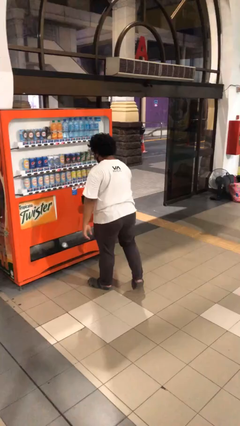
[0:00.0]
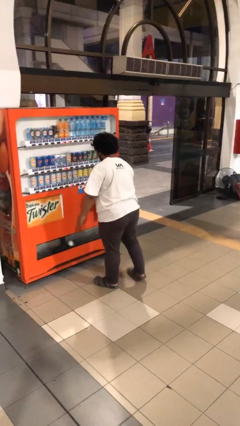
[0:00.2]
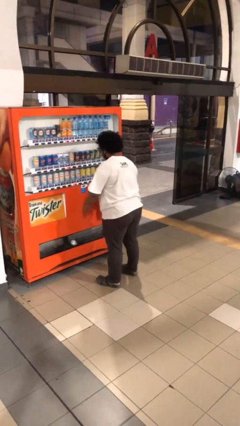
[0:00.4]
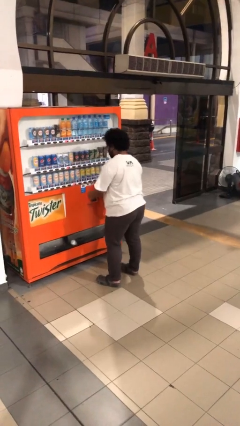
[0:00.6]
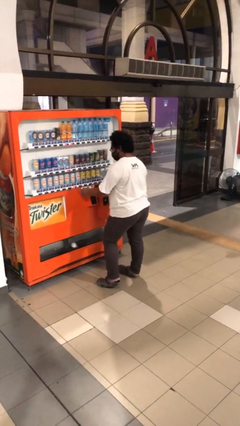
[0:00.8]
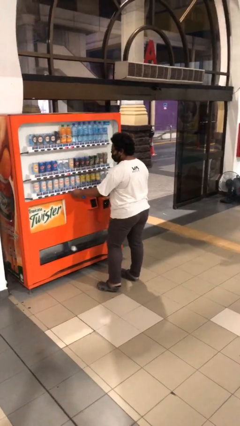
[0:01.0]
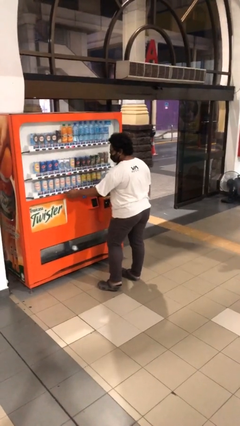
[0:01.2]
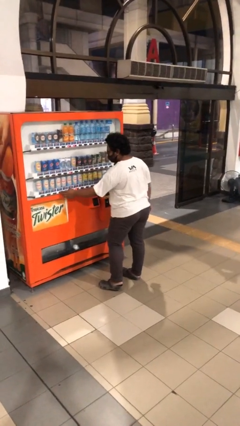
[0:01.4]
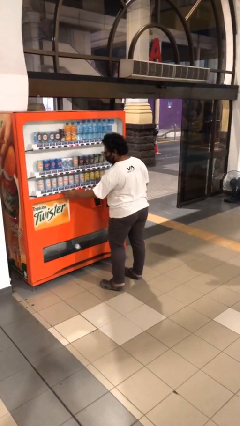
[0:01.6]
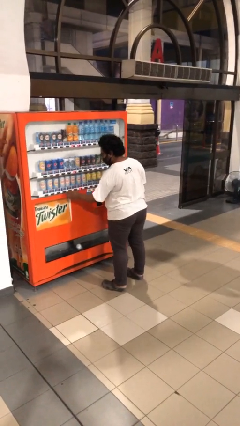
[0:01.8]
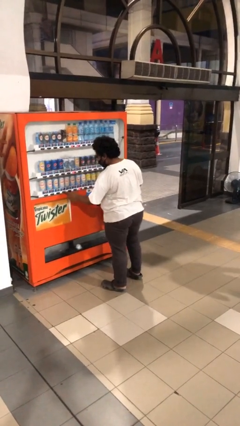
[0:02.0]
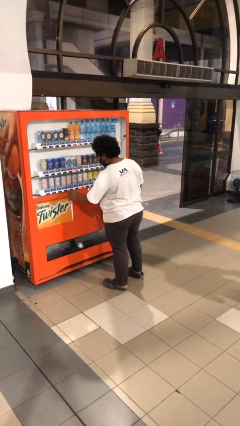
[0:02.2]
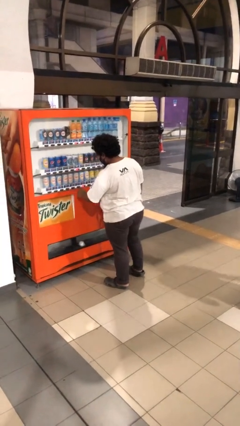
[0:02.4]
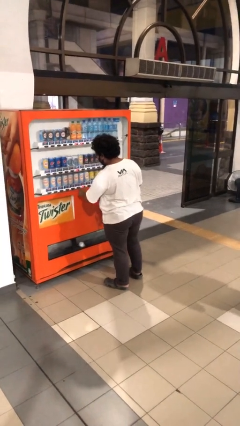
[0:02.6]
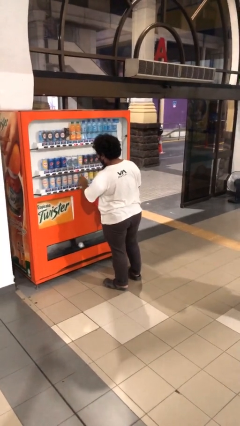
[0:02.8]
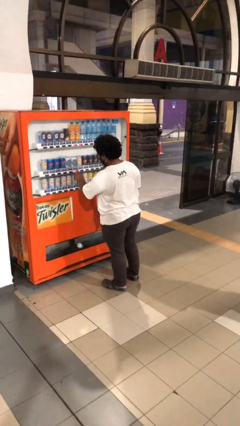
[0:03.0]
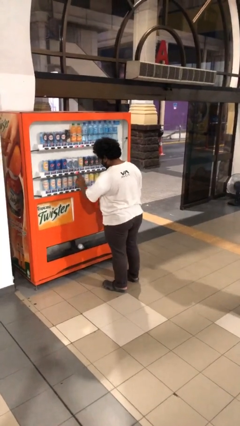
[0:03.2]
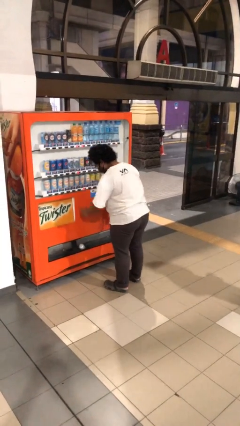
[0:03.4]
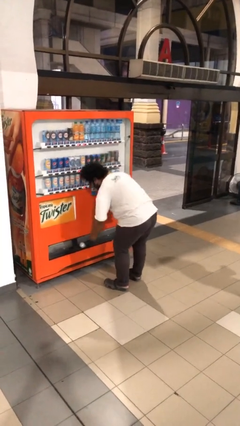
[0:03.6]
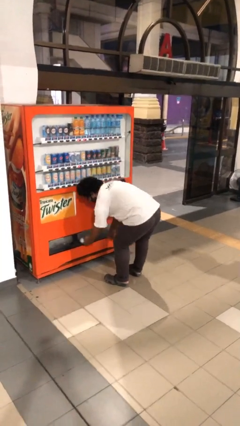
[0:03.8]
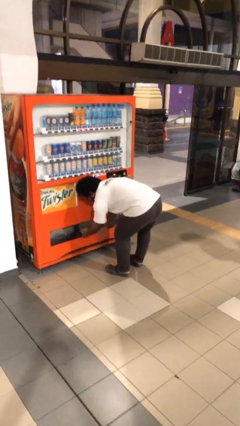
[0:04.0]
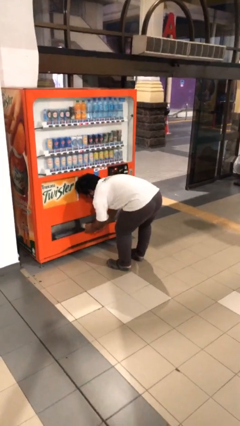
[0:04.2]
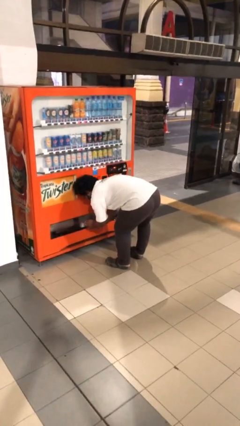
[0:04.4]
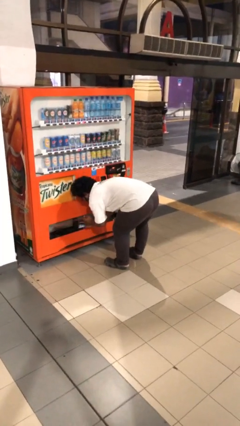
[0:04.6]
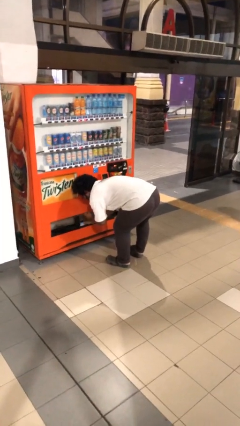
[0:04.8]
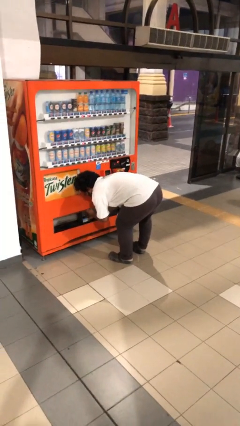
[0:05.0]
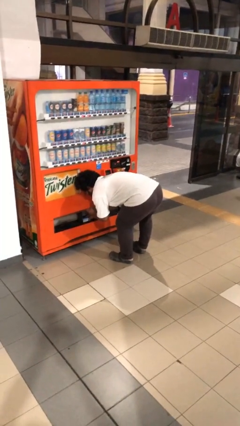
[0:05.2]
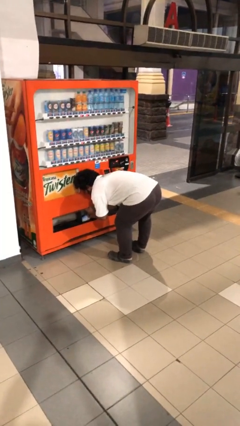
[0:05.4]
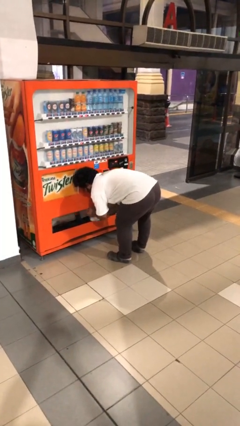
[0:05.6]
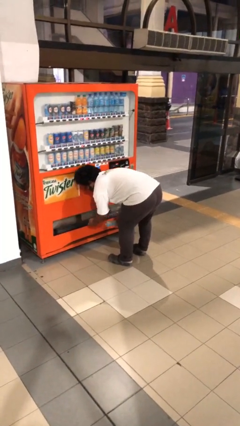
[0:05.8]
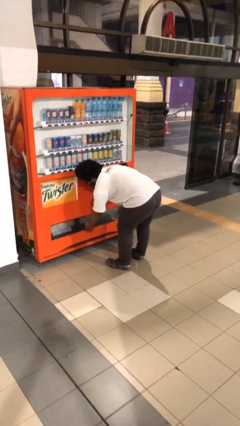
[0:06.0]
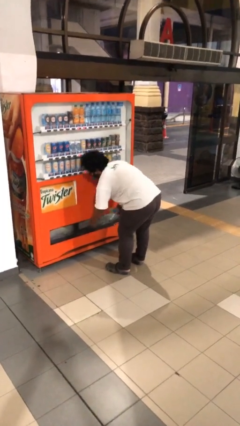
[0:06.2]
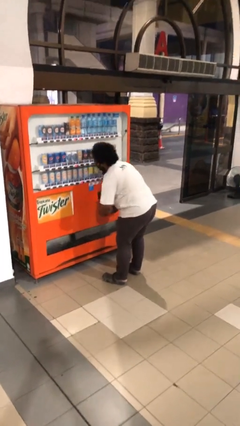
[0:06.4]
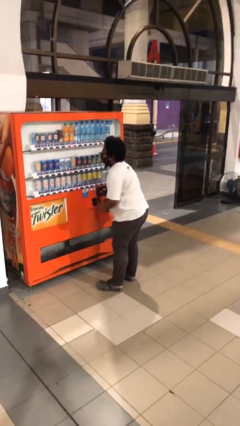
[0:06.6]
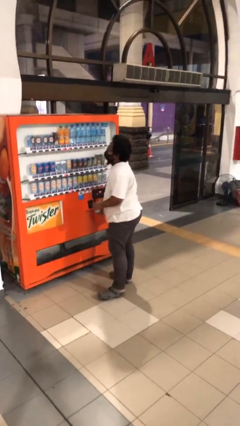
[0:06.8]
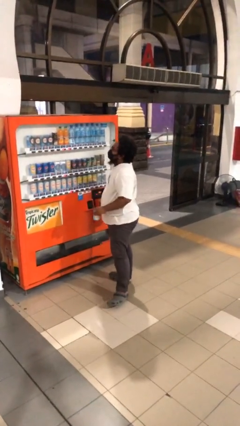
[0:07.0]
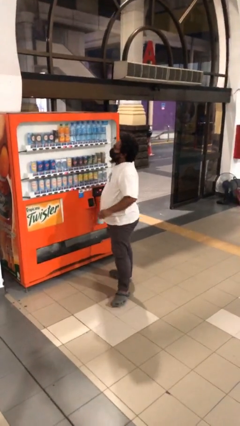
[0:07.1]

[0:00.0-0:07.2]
person purchases from machine

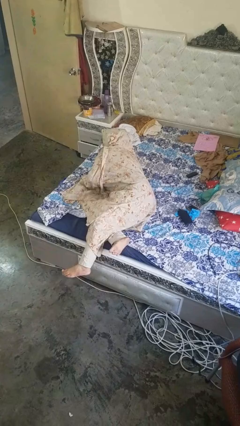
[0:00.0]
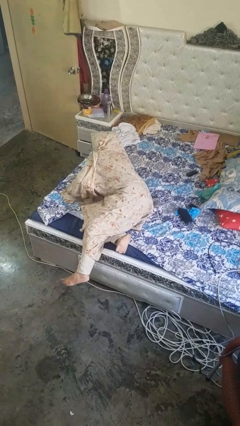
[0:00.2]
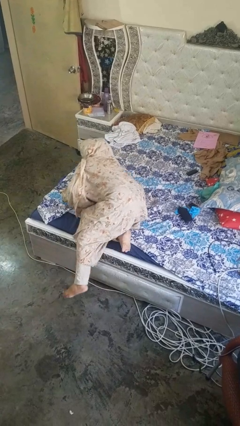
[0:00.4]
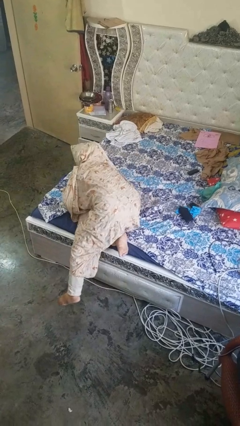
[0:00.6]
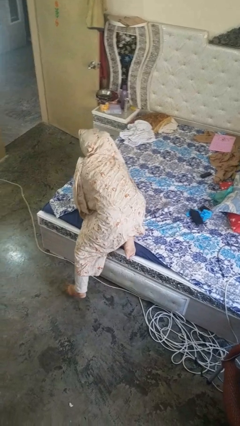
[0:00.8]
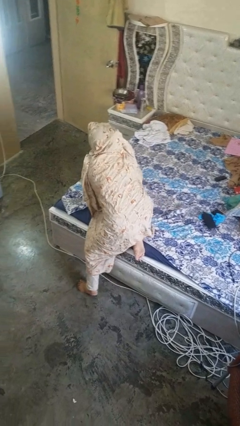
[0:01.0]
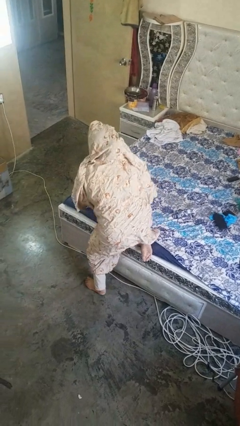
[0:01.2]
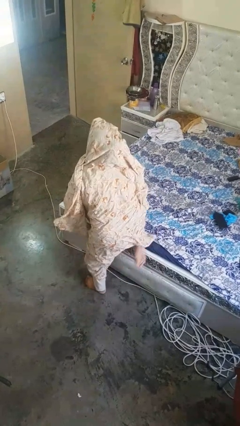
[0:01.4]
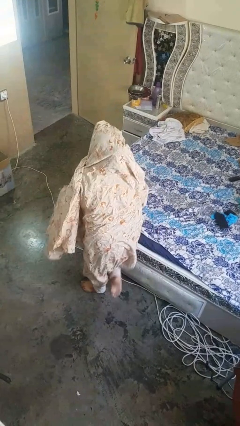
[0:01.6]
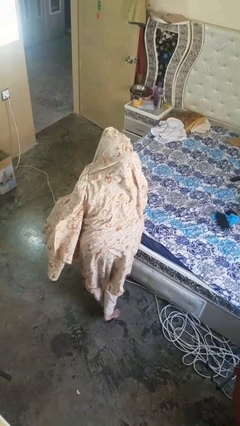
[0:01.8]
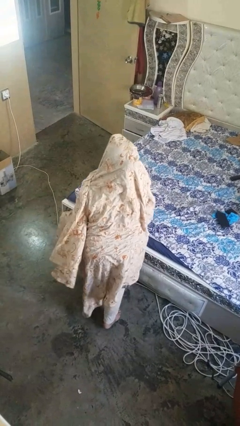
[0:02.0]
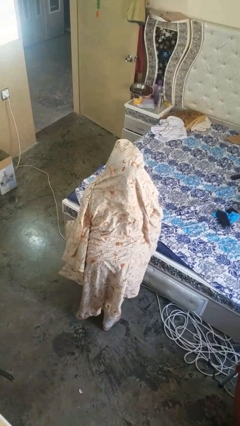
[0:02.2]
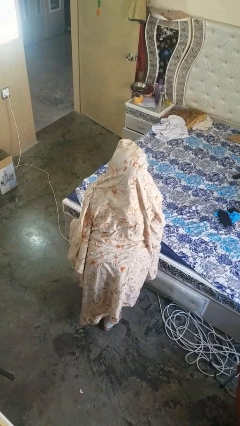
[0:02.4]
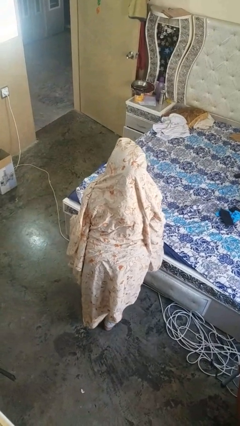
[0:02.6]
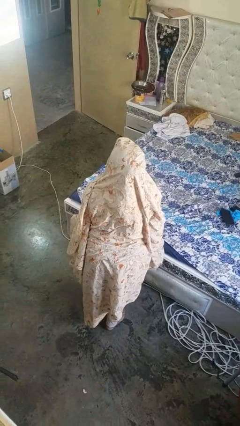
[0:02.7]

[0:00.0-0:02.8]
person stands up

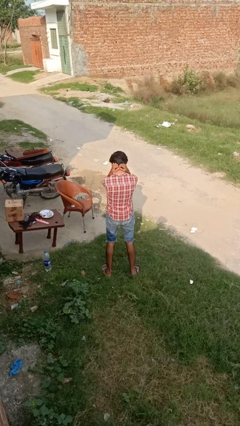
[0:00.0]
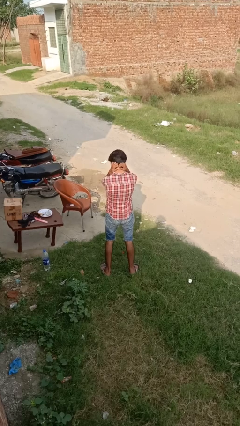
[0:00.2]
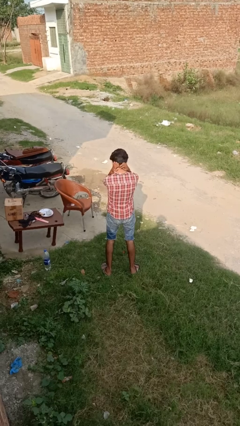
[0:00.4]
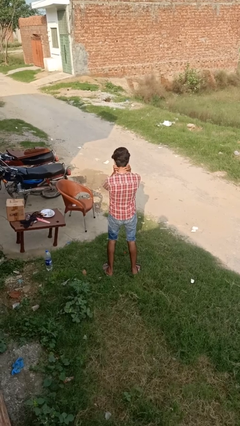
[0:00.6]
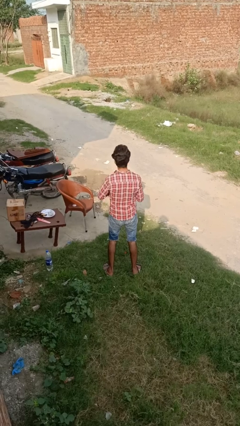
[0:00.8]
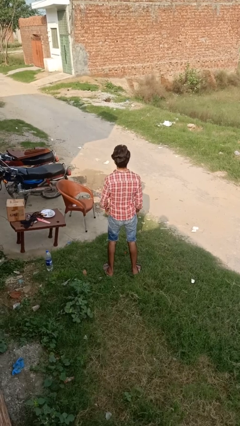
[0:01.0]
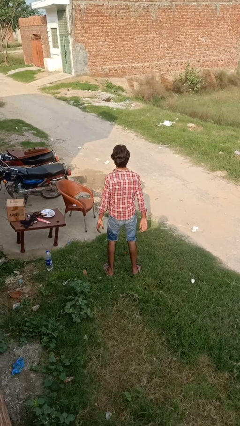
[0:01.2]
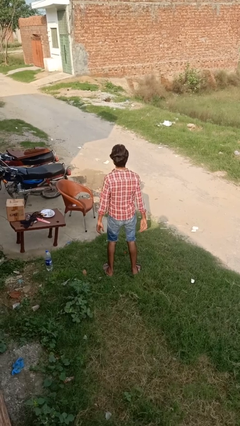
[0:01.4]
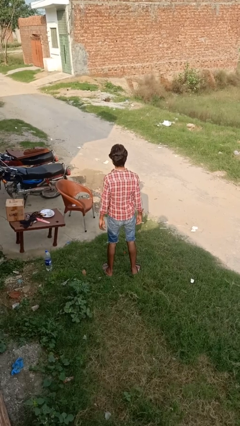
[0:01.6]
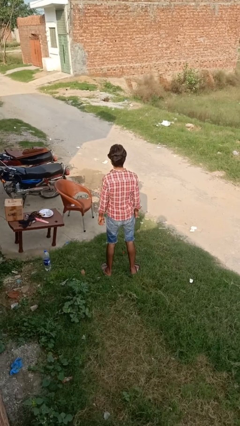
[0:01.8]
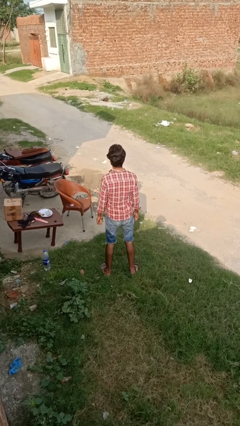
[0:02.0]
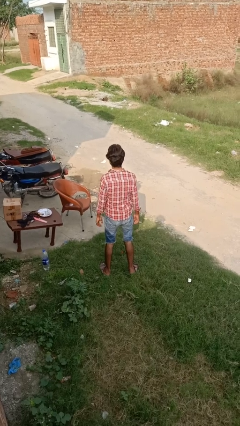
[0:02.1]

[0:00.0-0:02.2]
person takes off necklace

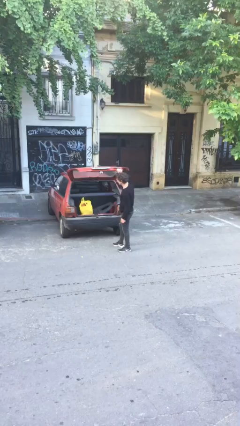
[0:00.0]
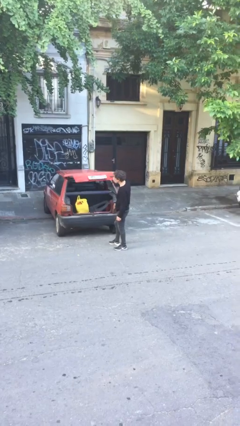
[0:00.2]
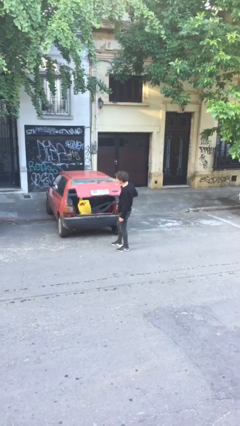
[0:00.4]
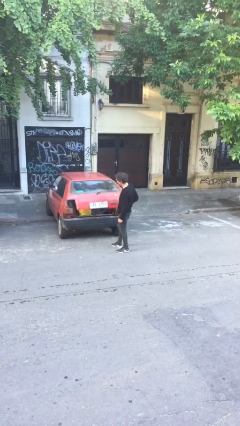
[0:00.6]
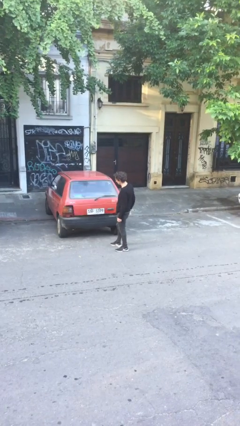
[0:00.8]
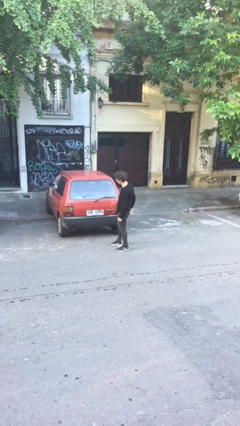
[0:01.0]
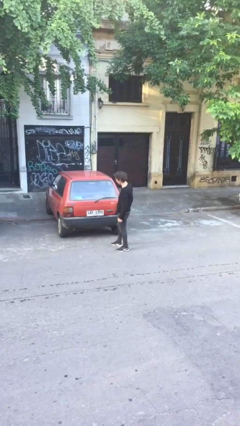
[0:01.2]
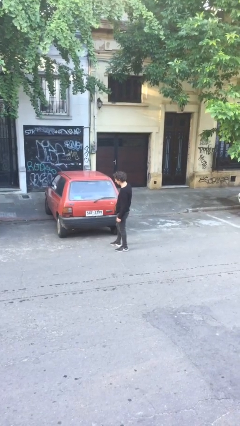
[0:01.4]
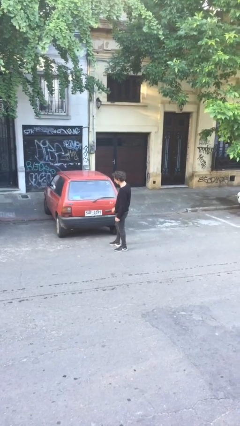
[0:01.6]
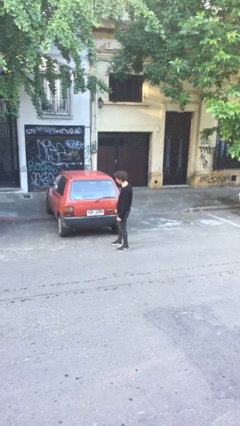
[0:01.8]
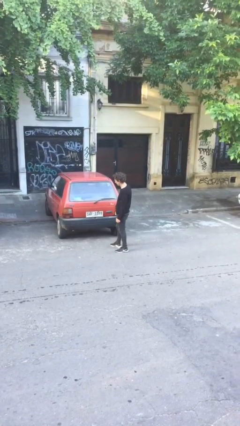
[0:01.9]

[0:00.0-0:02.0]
person closes car trunk

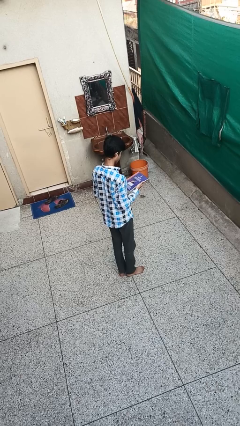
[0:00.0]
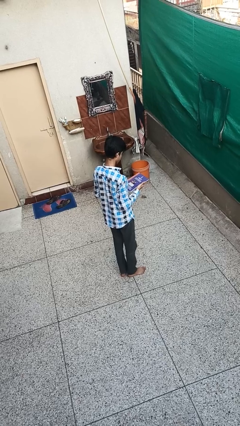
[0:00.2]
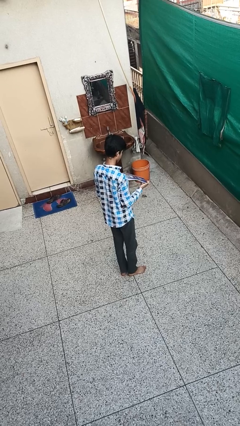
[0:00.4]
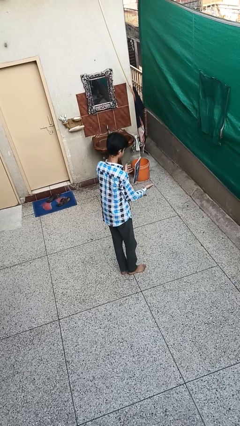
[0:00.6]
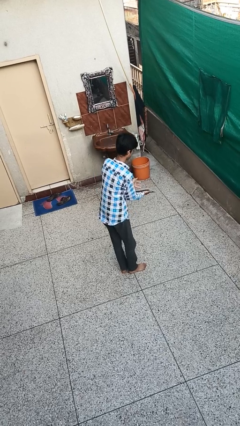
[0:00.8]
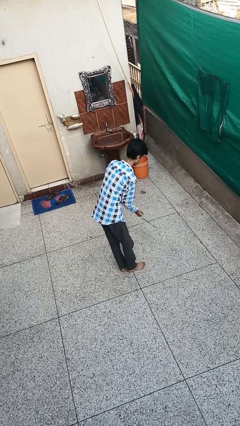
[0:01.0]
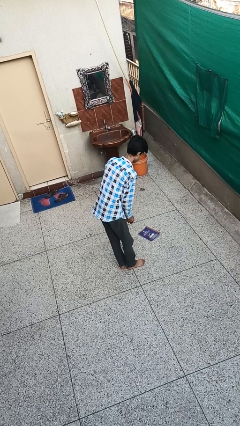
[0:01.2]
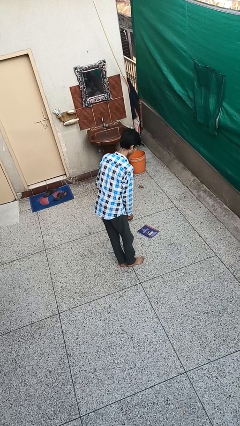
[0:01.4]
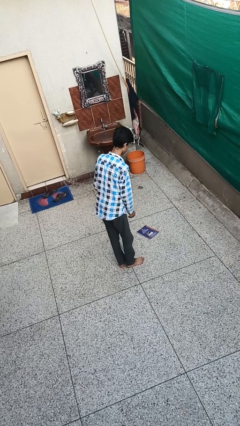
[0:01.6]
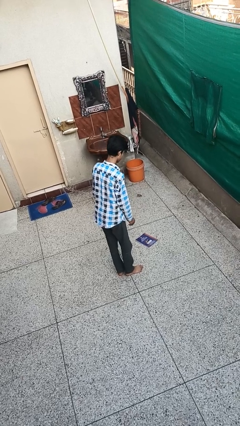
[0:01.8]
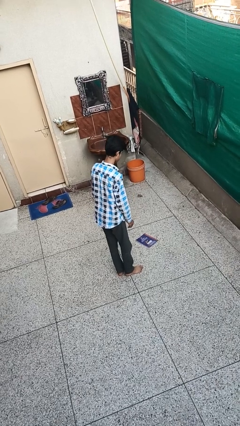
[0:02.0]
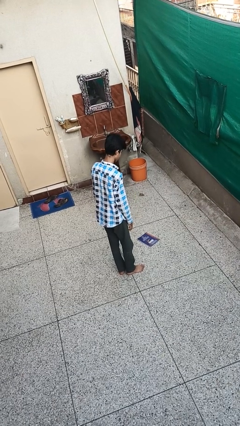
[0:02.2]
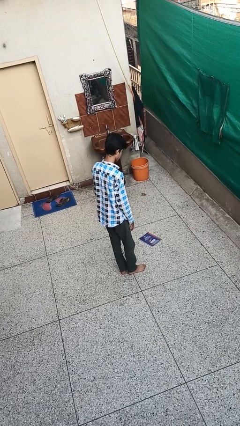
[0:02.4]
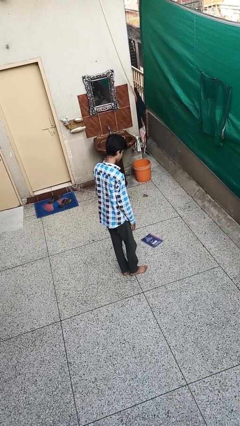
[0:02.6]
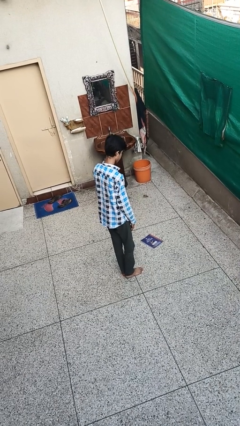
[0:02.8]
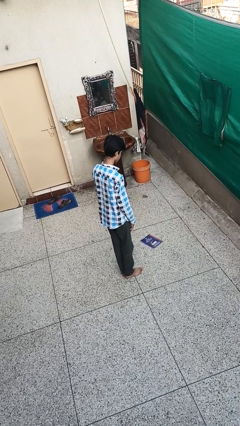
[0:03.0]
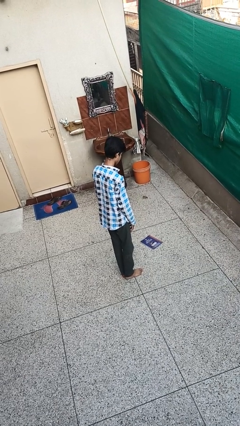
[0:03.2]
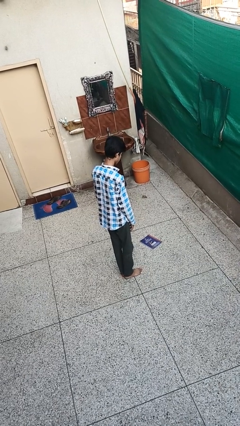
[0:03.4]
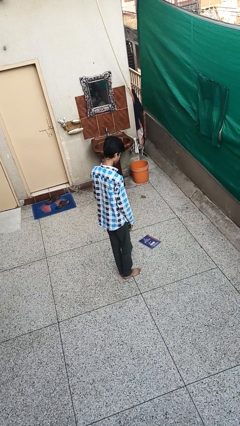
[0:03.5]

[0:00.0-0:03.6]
person drops object
